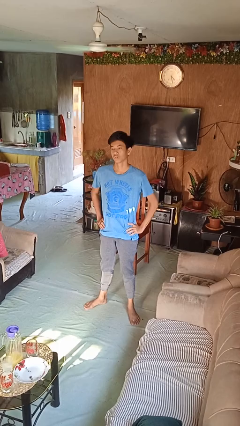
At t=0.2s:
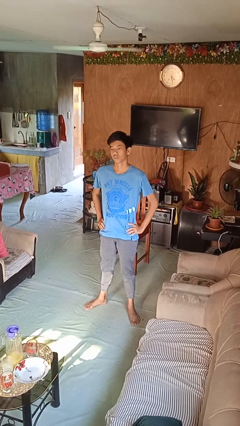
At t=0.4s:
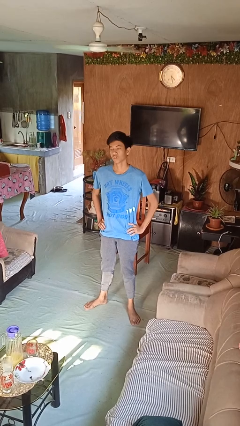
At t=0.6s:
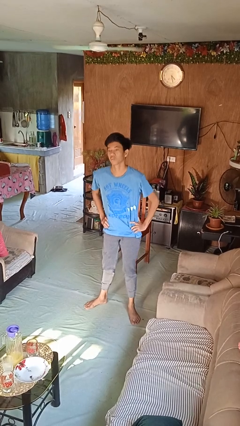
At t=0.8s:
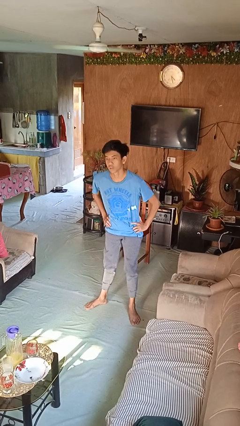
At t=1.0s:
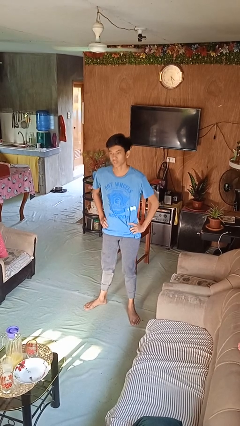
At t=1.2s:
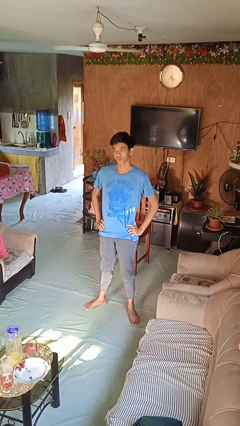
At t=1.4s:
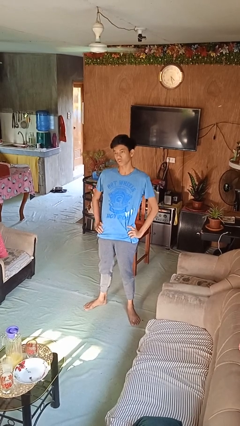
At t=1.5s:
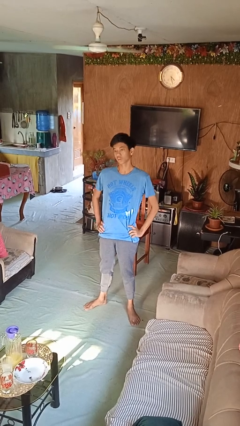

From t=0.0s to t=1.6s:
person wiggles hips

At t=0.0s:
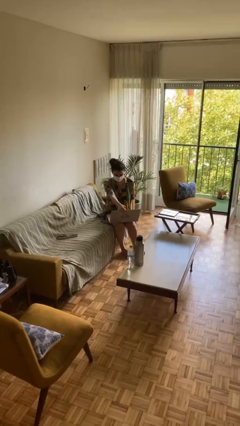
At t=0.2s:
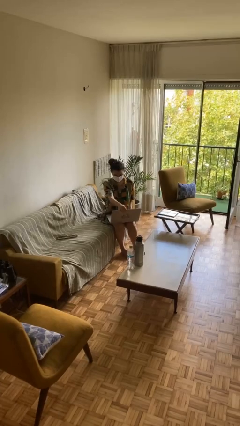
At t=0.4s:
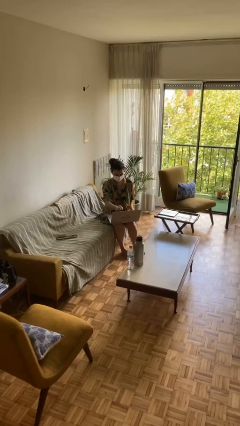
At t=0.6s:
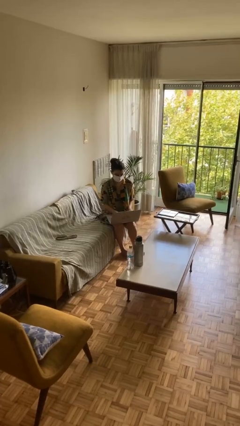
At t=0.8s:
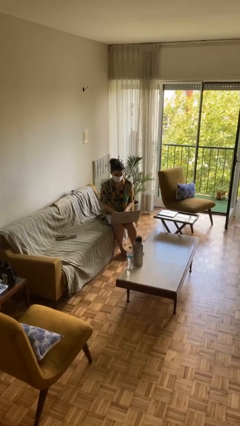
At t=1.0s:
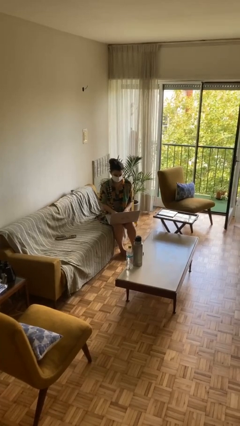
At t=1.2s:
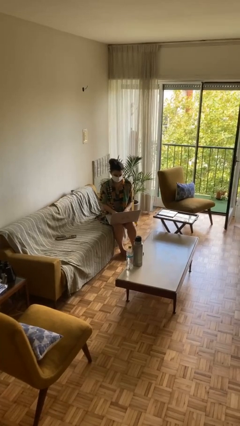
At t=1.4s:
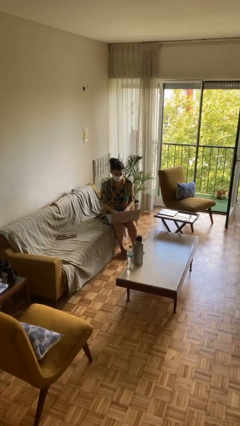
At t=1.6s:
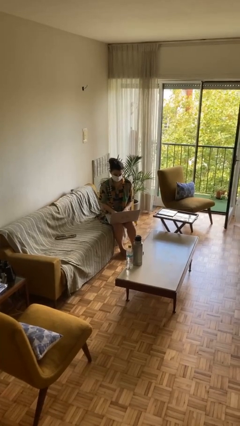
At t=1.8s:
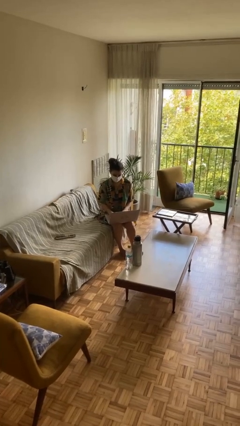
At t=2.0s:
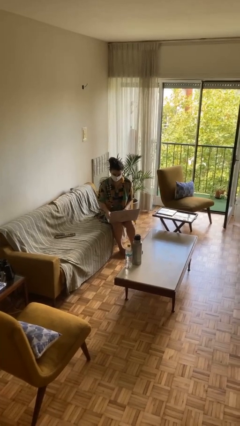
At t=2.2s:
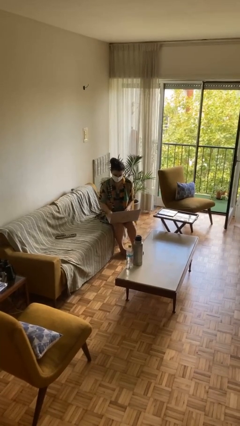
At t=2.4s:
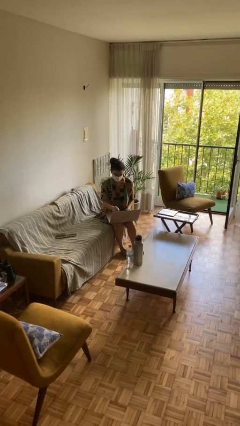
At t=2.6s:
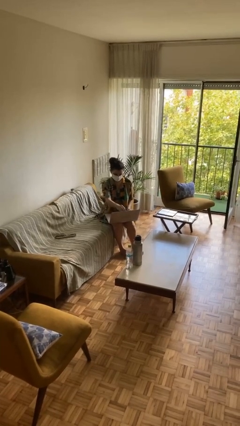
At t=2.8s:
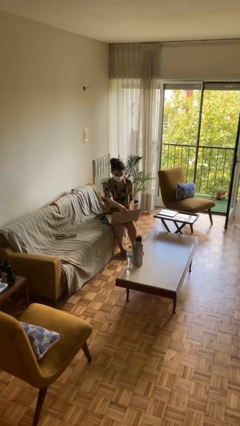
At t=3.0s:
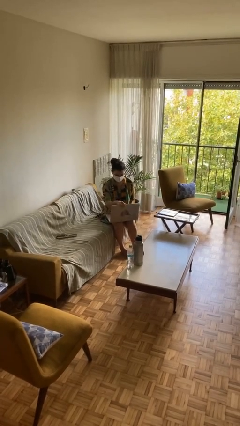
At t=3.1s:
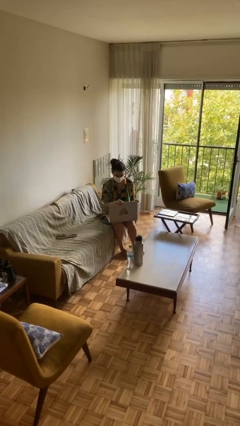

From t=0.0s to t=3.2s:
person interacts with laptop

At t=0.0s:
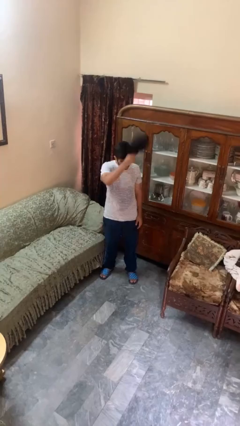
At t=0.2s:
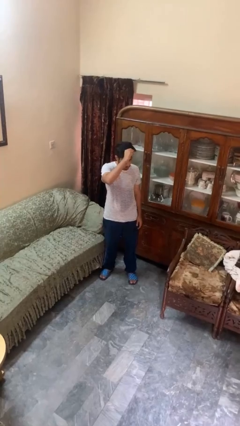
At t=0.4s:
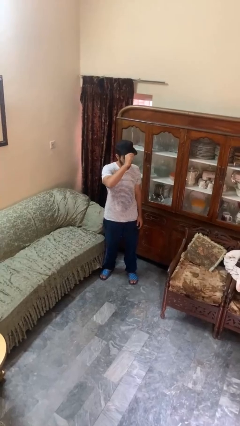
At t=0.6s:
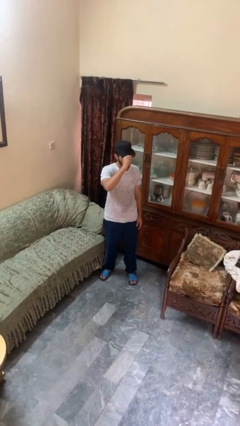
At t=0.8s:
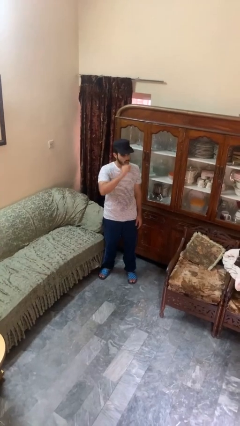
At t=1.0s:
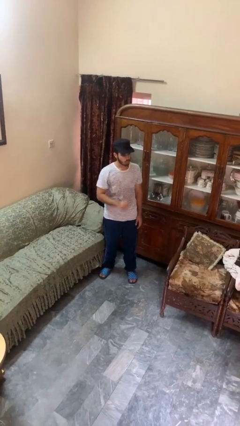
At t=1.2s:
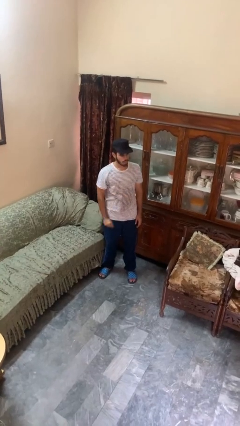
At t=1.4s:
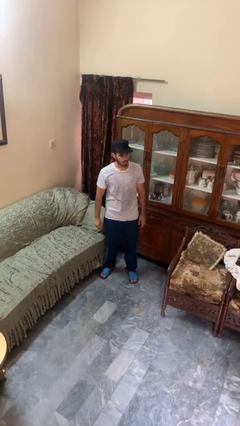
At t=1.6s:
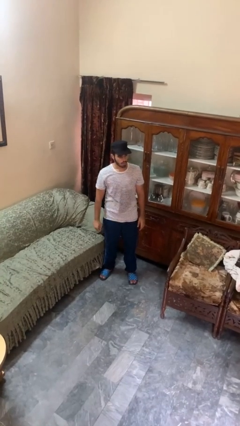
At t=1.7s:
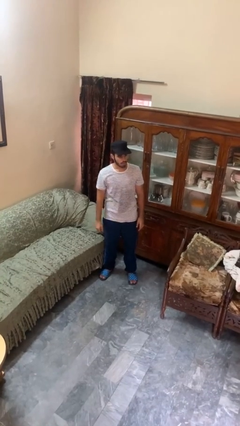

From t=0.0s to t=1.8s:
person puts on hat

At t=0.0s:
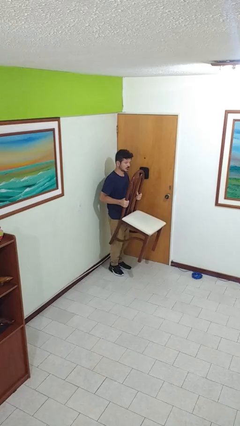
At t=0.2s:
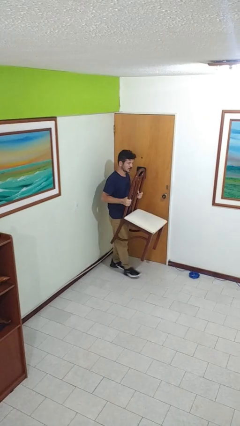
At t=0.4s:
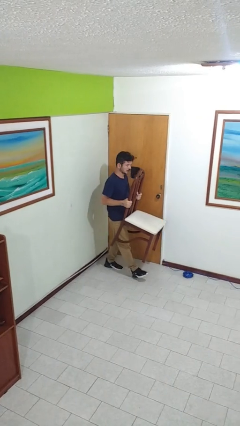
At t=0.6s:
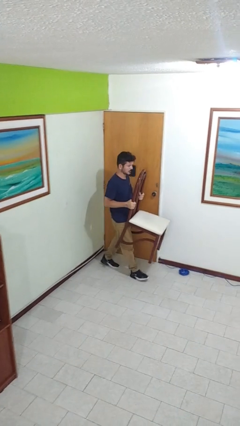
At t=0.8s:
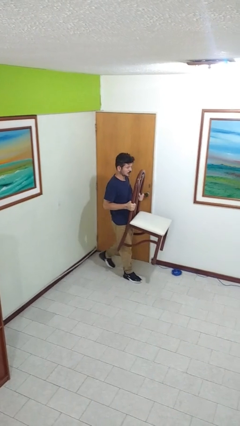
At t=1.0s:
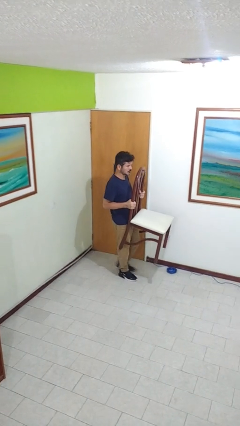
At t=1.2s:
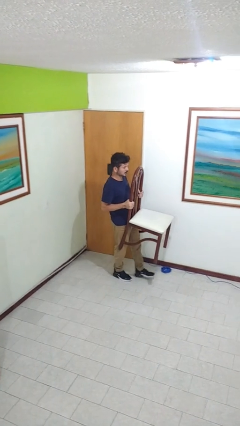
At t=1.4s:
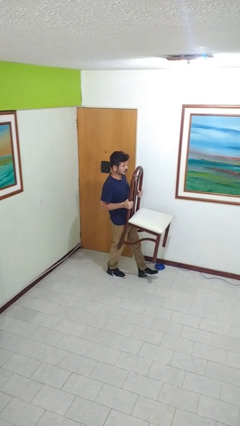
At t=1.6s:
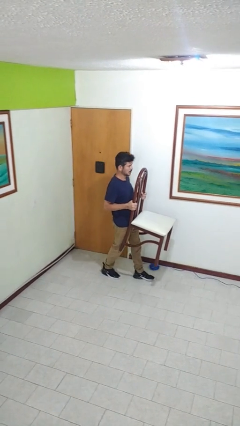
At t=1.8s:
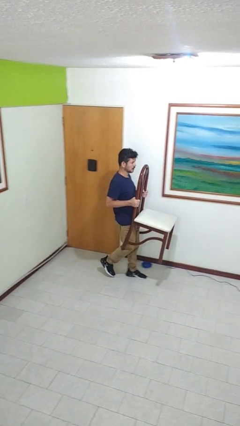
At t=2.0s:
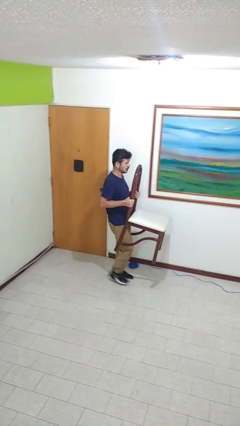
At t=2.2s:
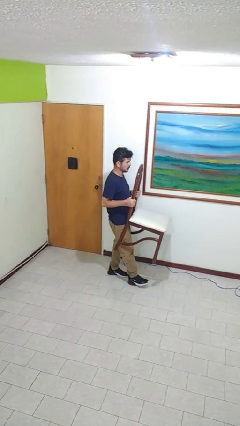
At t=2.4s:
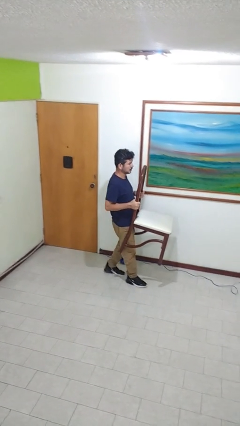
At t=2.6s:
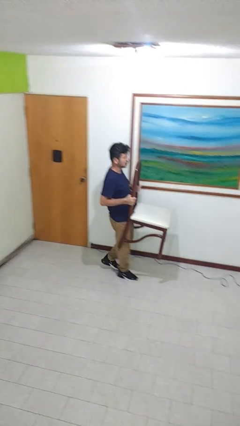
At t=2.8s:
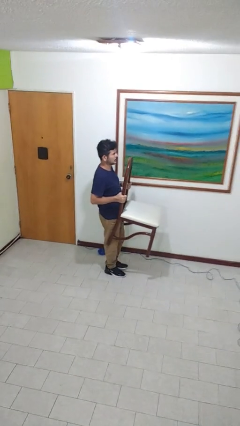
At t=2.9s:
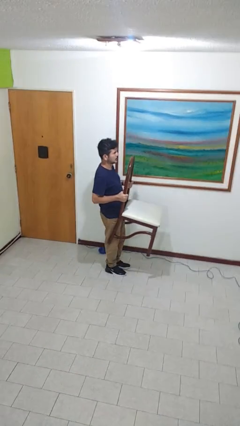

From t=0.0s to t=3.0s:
person carries furniture

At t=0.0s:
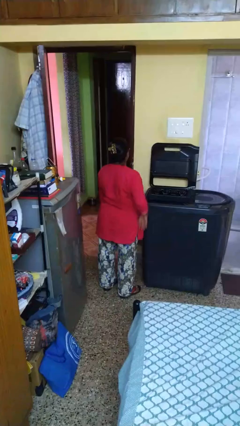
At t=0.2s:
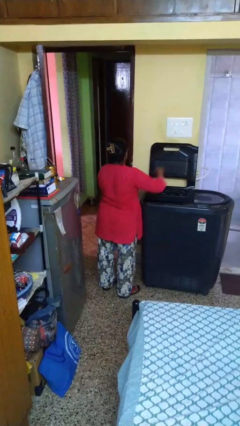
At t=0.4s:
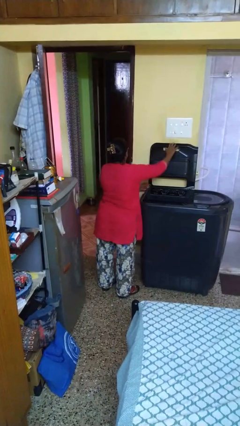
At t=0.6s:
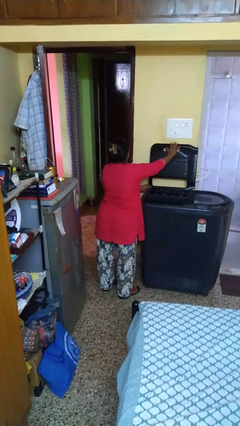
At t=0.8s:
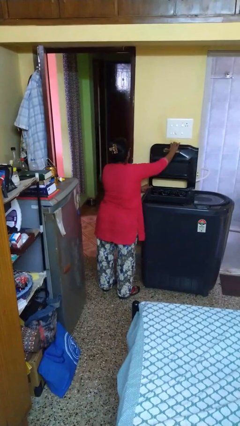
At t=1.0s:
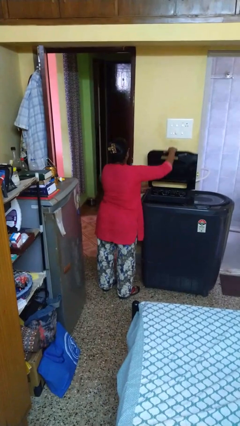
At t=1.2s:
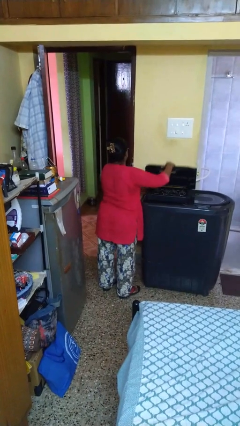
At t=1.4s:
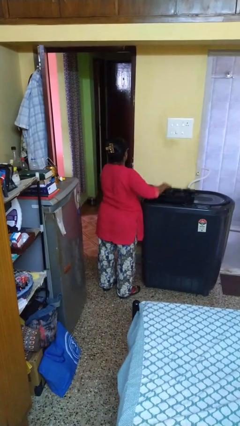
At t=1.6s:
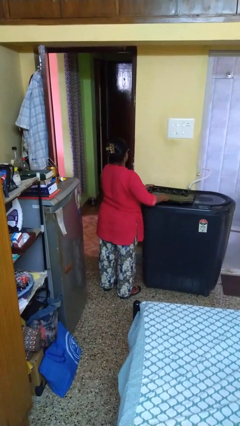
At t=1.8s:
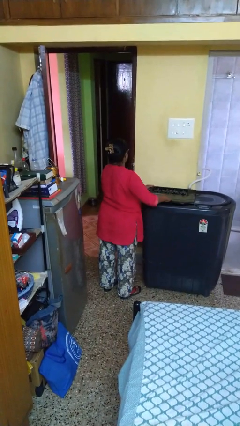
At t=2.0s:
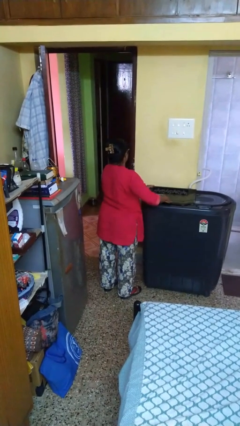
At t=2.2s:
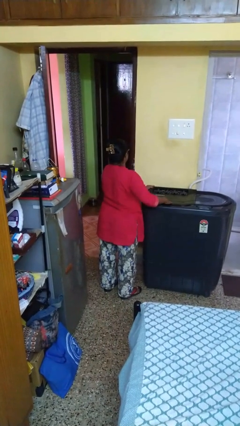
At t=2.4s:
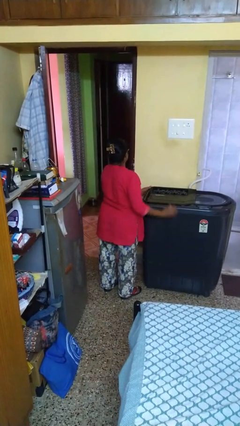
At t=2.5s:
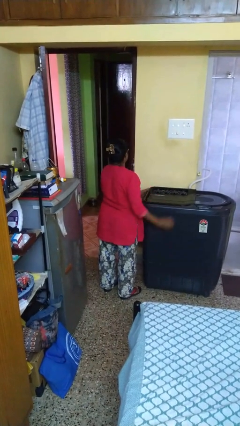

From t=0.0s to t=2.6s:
person closes clothes washer

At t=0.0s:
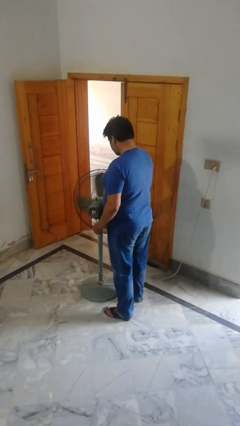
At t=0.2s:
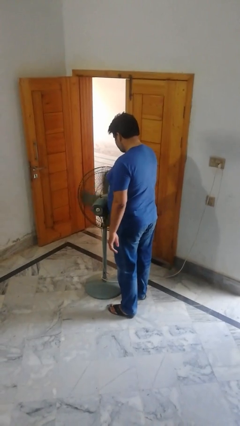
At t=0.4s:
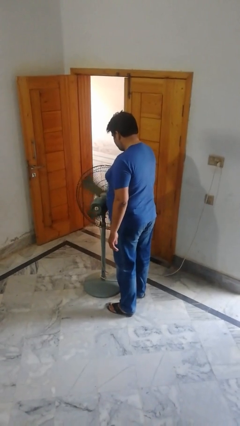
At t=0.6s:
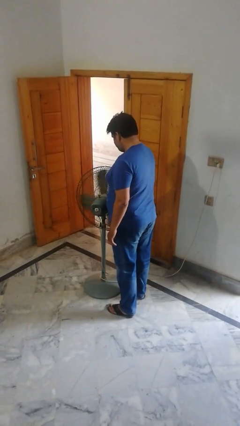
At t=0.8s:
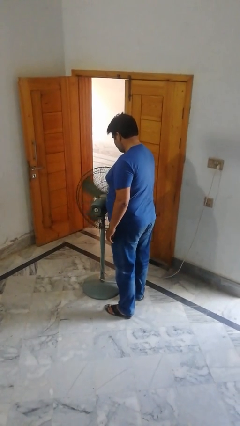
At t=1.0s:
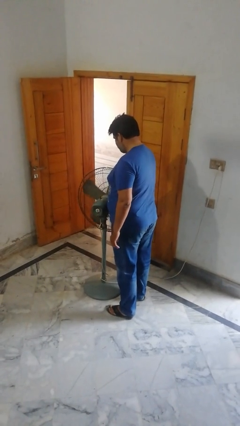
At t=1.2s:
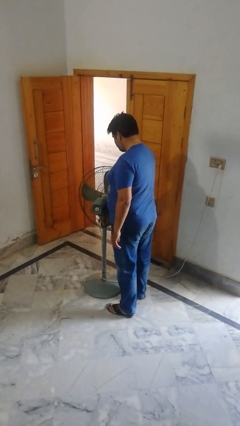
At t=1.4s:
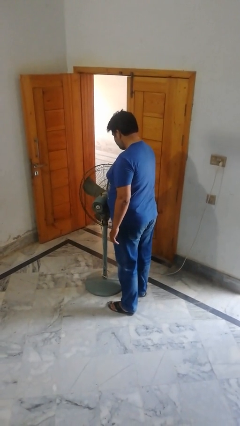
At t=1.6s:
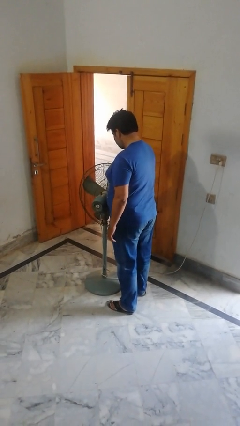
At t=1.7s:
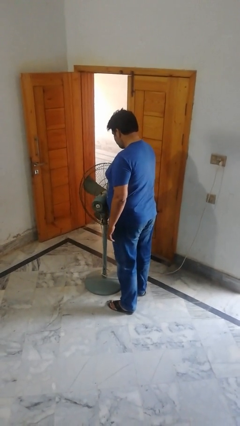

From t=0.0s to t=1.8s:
person turns off fan

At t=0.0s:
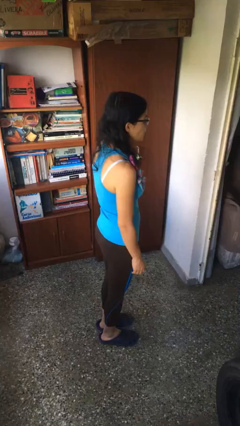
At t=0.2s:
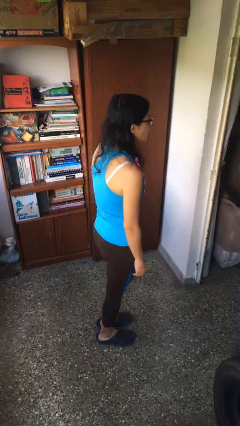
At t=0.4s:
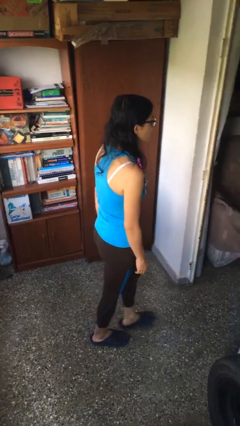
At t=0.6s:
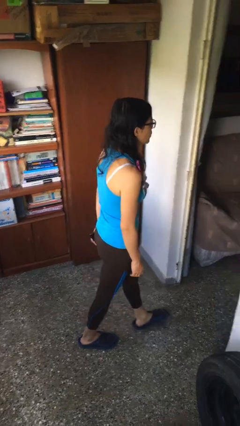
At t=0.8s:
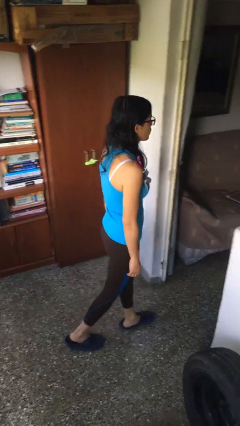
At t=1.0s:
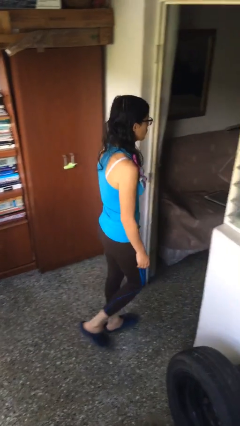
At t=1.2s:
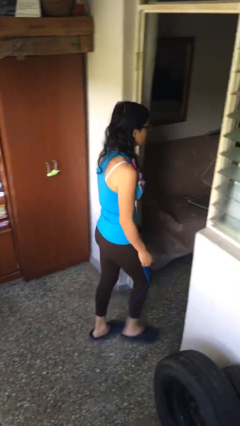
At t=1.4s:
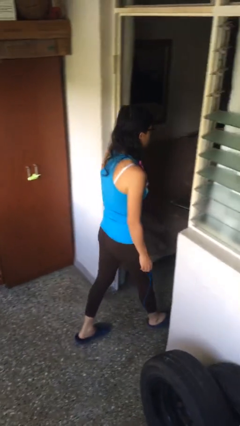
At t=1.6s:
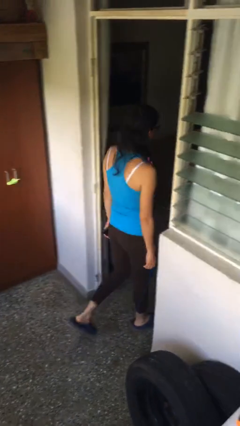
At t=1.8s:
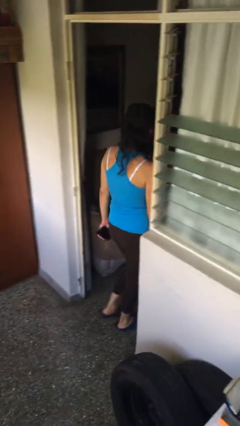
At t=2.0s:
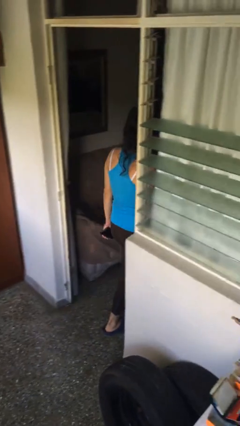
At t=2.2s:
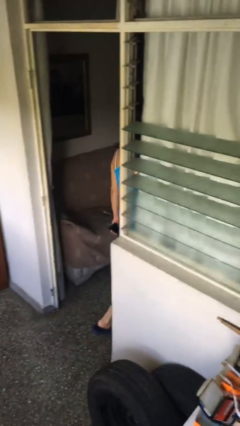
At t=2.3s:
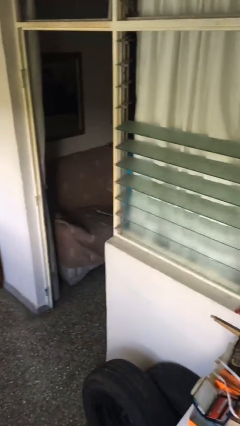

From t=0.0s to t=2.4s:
person exits scene through structure

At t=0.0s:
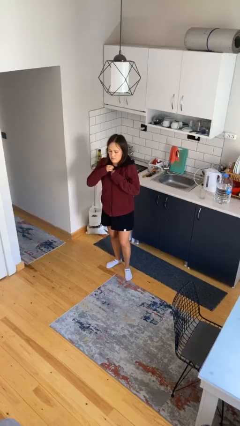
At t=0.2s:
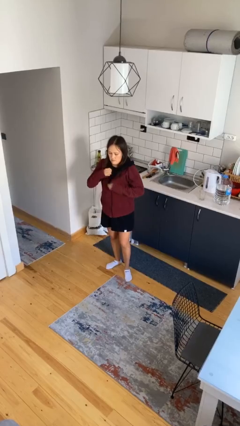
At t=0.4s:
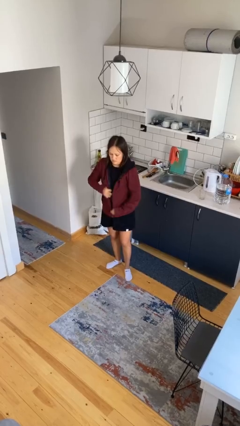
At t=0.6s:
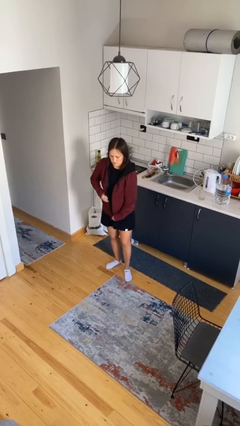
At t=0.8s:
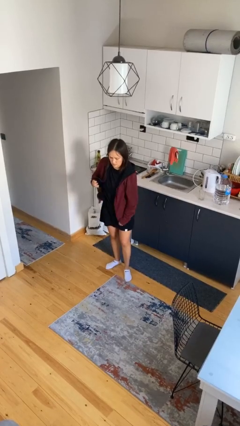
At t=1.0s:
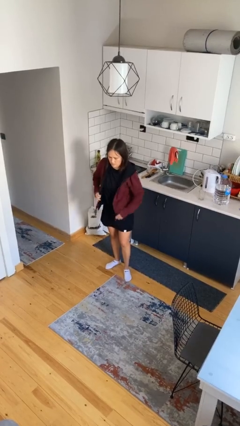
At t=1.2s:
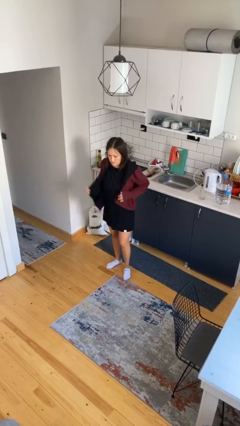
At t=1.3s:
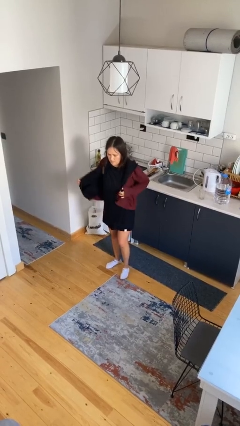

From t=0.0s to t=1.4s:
person unzips jacket
